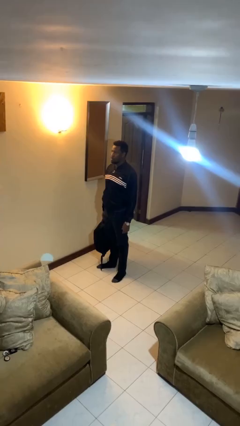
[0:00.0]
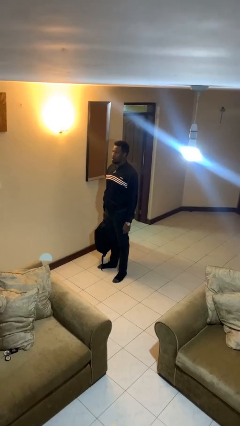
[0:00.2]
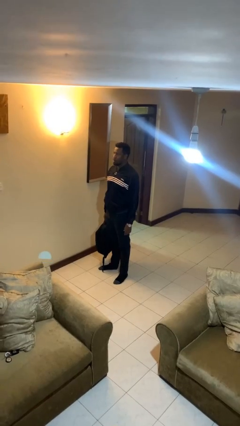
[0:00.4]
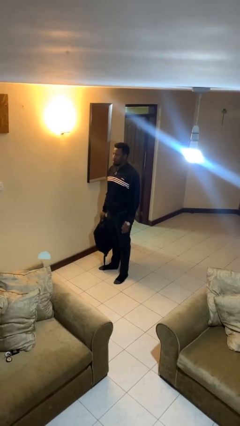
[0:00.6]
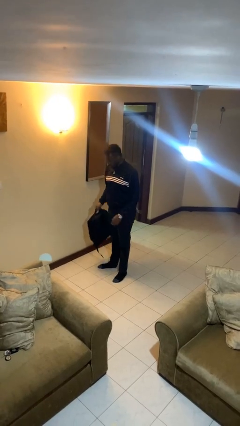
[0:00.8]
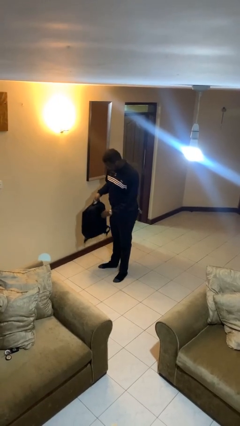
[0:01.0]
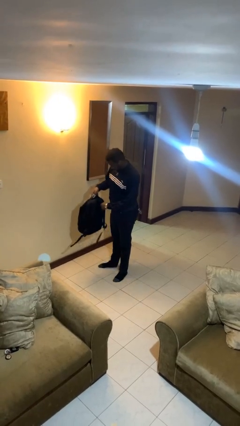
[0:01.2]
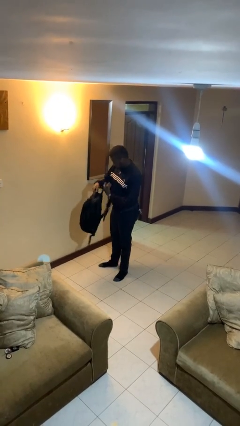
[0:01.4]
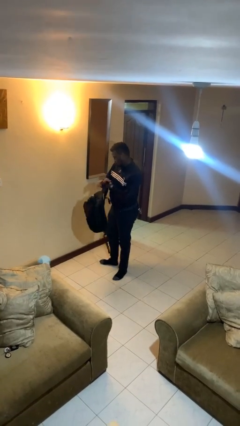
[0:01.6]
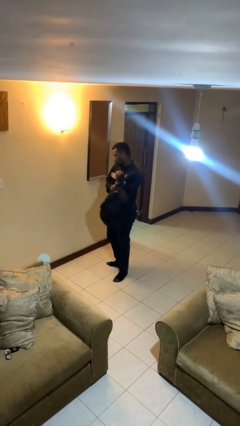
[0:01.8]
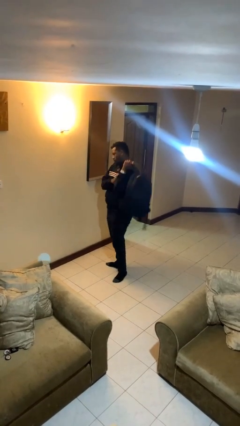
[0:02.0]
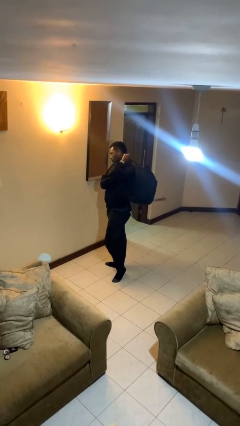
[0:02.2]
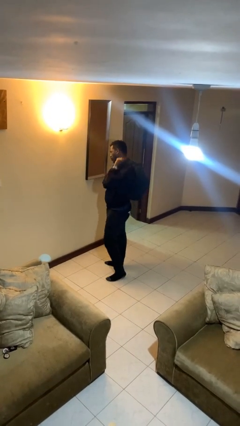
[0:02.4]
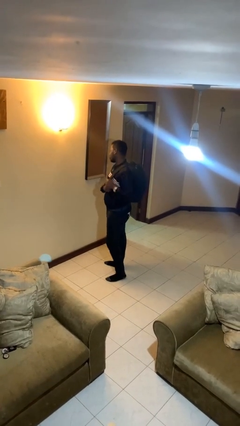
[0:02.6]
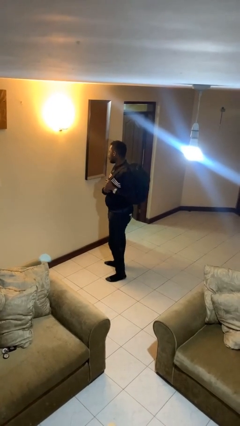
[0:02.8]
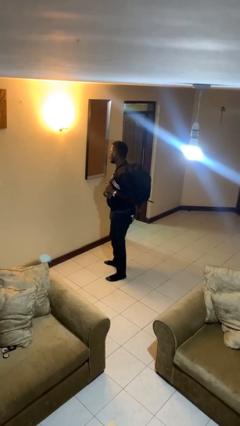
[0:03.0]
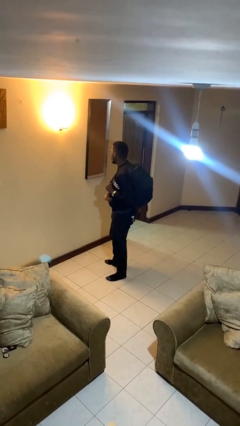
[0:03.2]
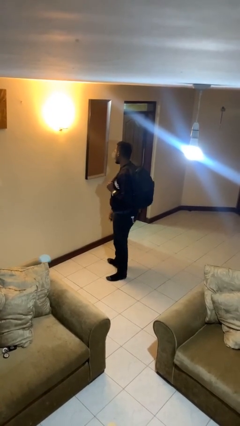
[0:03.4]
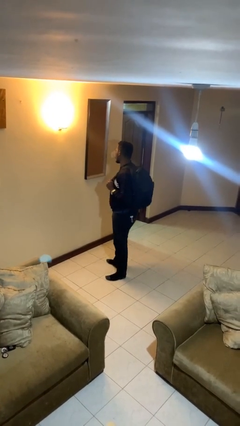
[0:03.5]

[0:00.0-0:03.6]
person puts on backpack

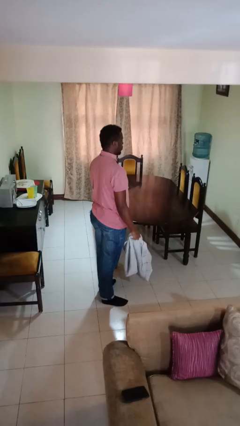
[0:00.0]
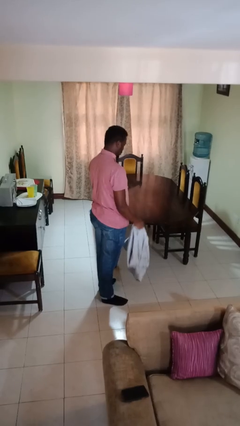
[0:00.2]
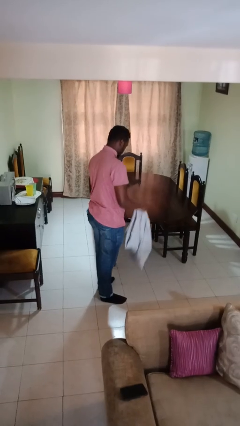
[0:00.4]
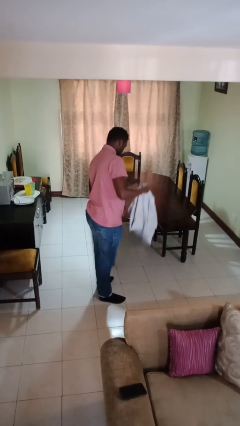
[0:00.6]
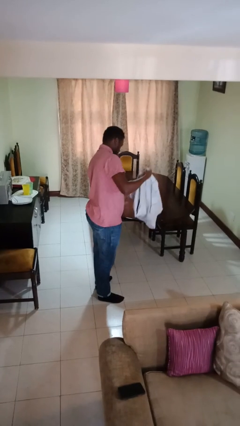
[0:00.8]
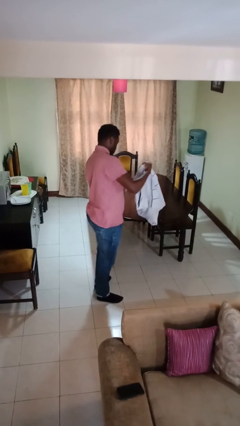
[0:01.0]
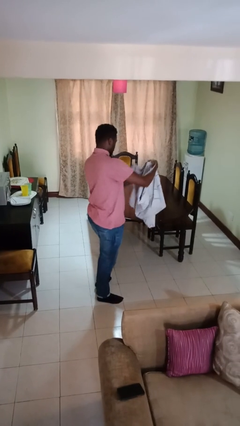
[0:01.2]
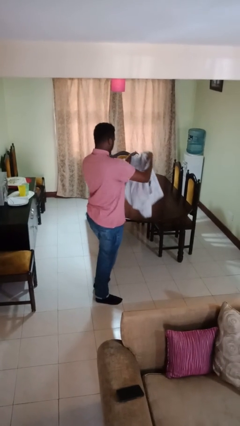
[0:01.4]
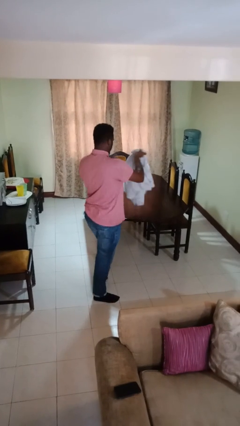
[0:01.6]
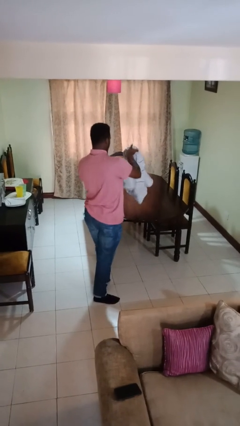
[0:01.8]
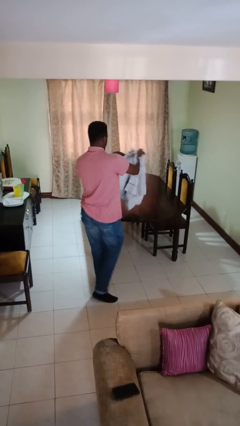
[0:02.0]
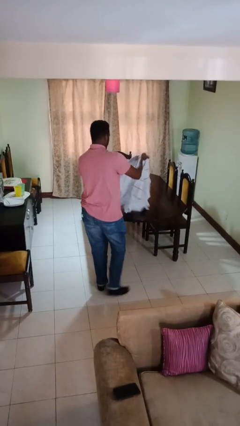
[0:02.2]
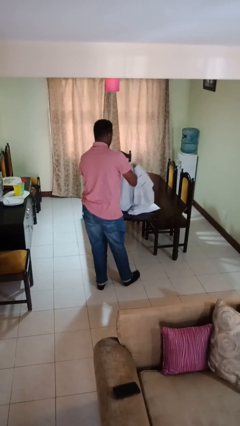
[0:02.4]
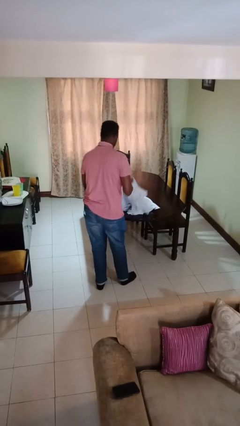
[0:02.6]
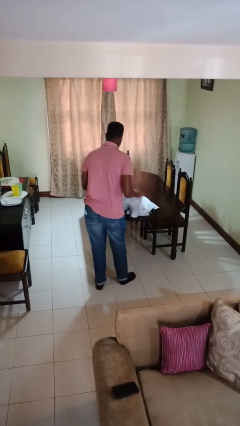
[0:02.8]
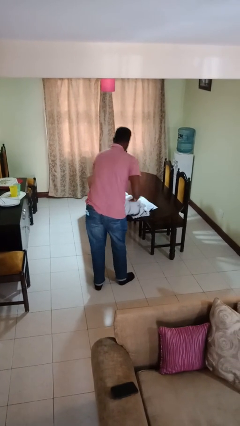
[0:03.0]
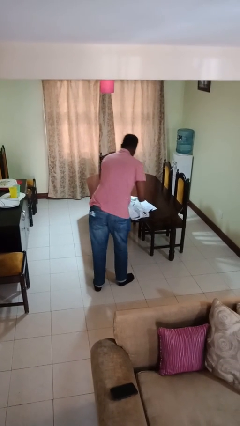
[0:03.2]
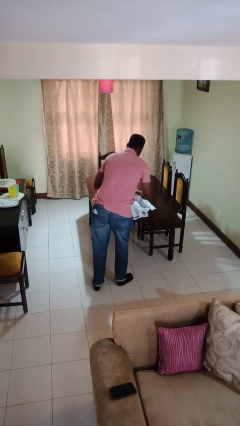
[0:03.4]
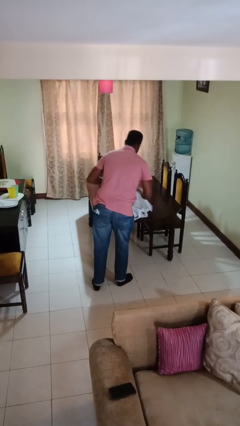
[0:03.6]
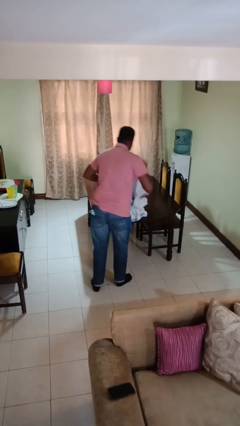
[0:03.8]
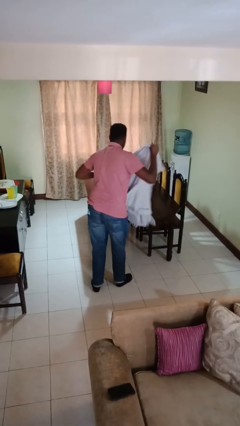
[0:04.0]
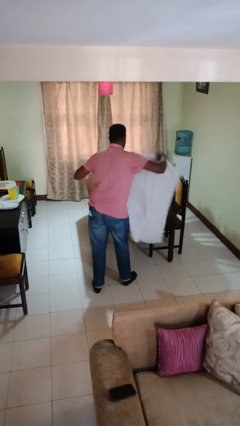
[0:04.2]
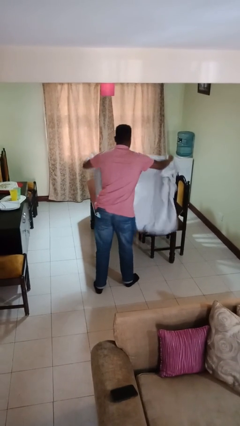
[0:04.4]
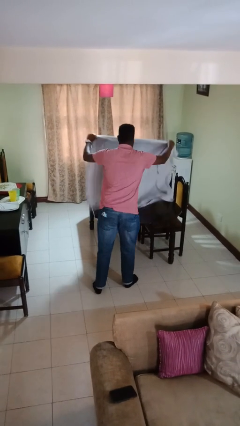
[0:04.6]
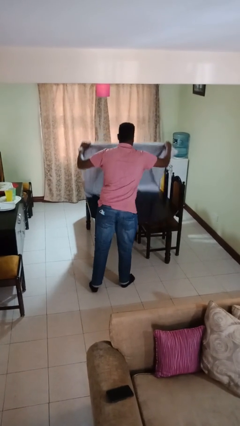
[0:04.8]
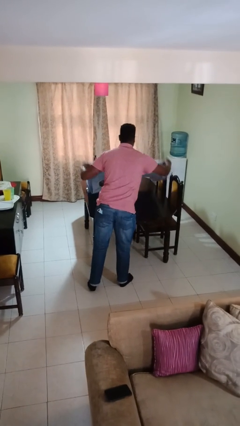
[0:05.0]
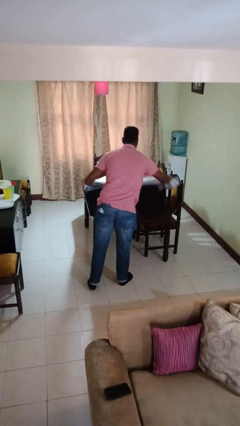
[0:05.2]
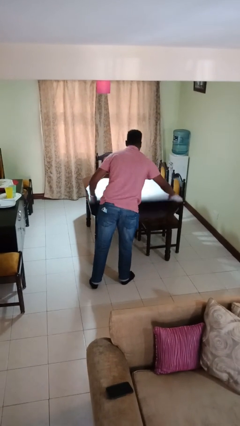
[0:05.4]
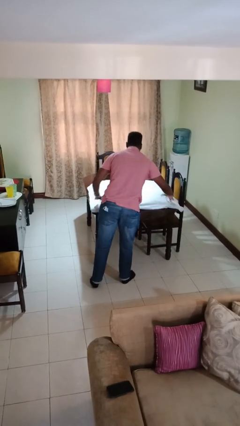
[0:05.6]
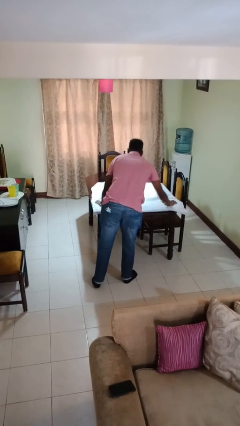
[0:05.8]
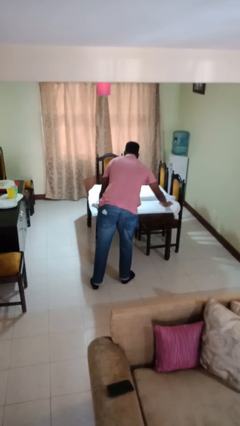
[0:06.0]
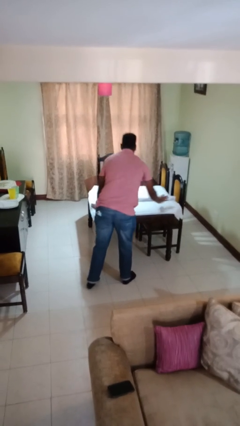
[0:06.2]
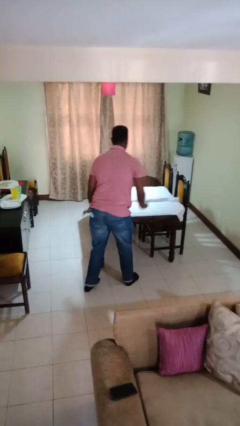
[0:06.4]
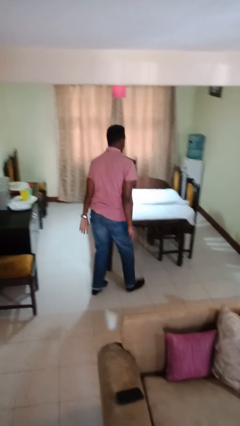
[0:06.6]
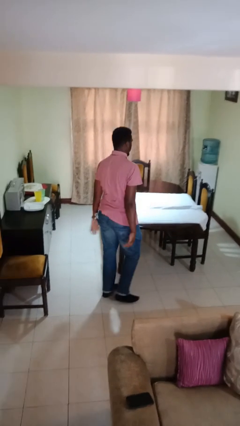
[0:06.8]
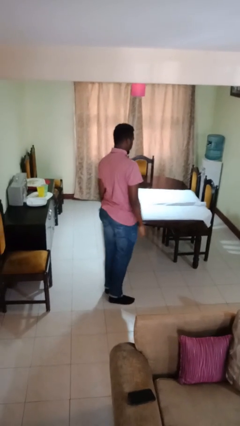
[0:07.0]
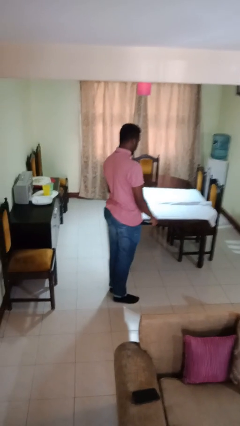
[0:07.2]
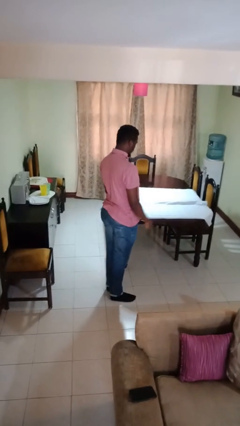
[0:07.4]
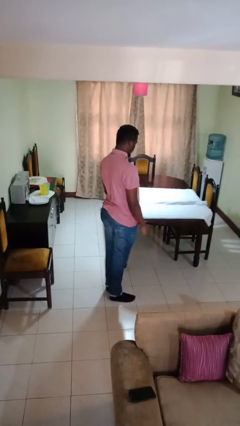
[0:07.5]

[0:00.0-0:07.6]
person spreads tablecloth

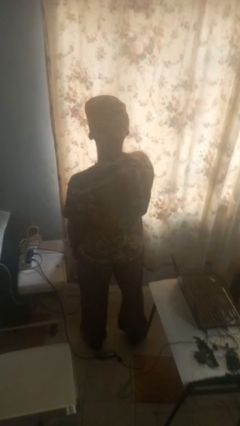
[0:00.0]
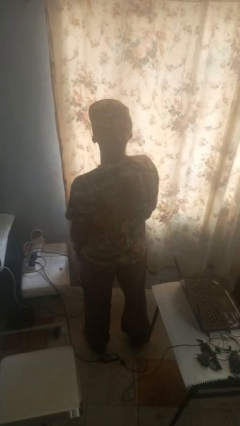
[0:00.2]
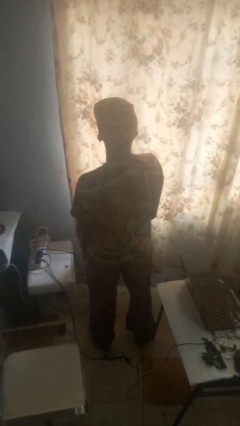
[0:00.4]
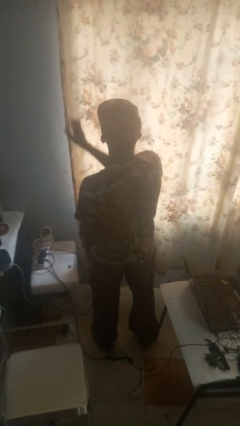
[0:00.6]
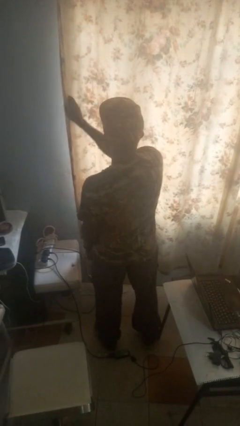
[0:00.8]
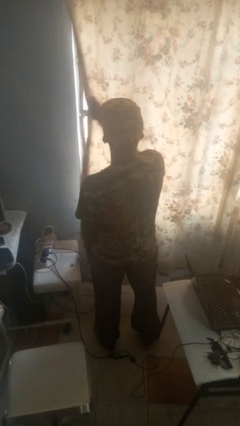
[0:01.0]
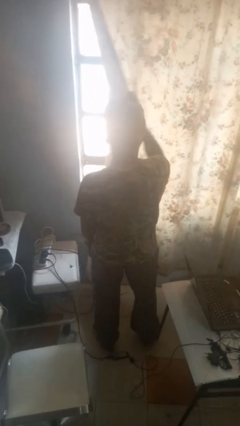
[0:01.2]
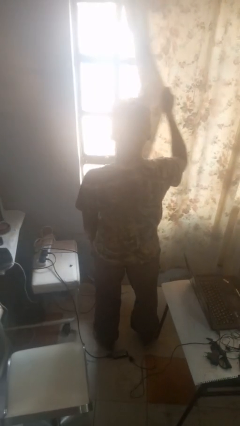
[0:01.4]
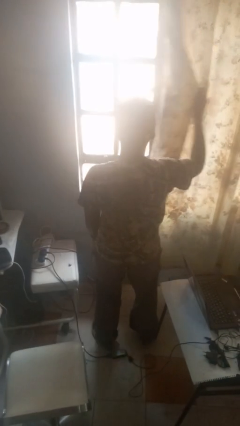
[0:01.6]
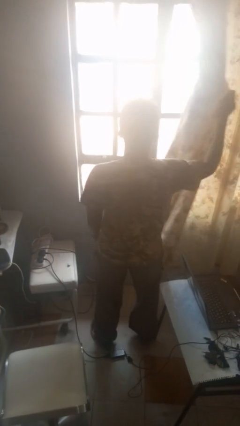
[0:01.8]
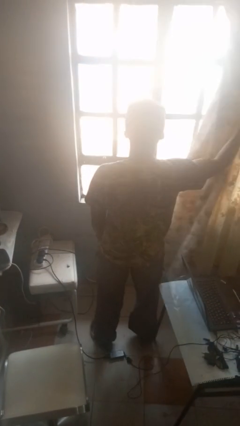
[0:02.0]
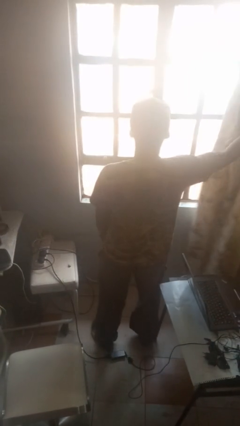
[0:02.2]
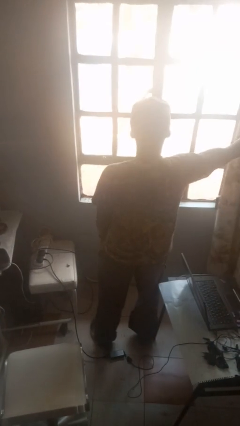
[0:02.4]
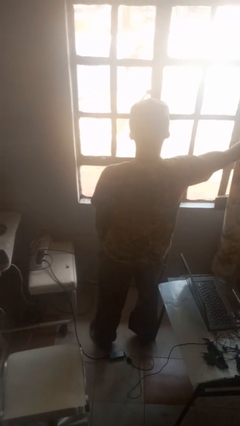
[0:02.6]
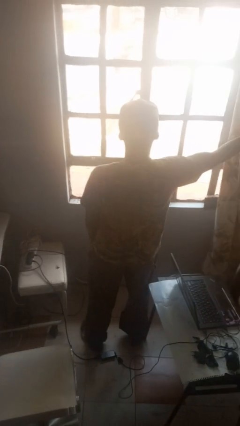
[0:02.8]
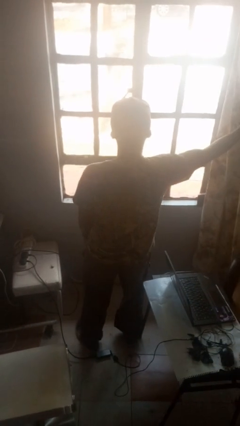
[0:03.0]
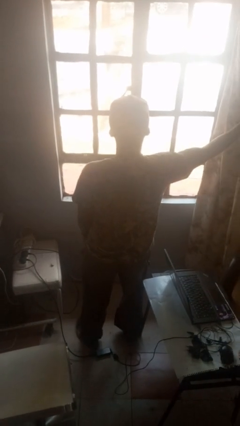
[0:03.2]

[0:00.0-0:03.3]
person opens curtains

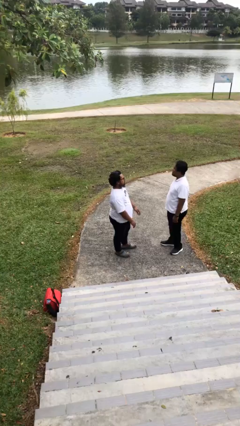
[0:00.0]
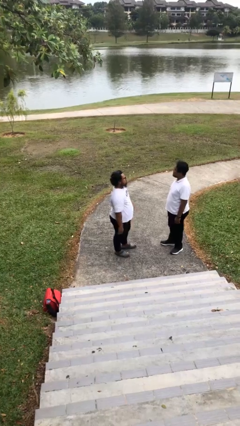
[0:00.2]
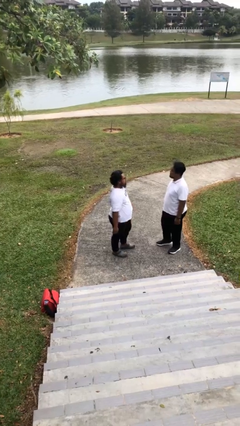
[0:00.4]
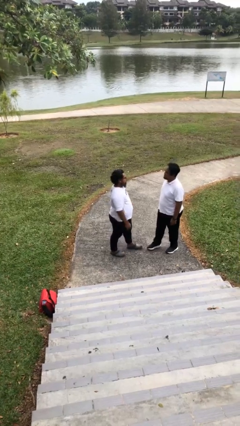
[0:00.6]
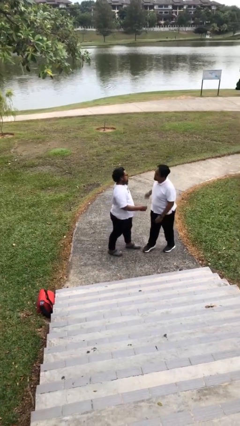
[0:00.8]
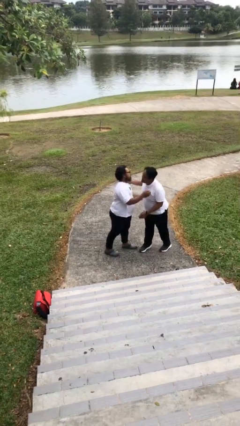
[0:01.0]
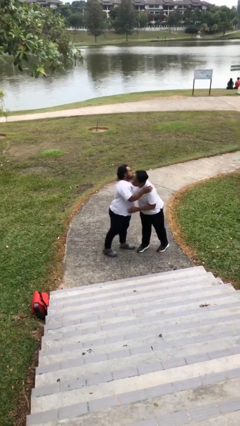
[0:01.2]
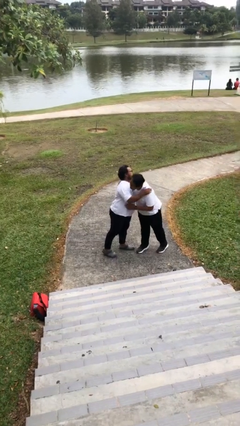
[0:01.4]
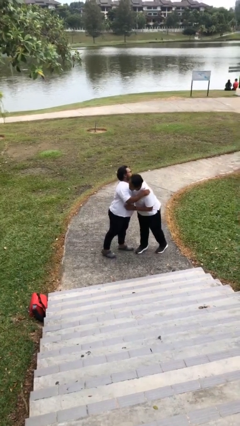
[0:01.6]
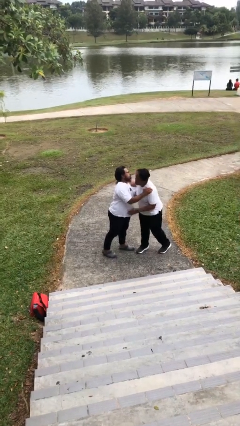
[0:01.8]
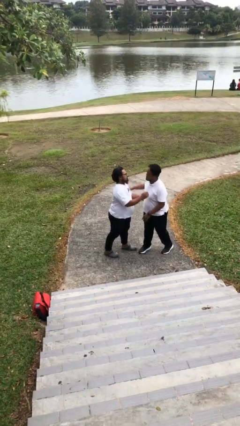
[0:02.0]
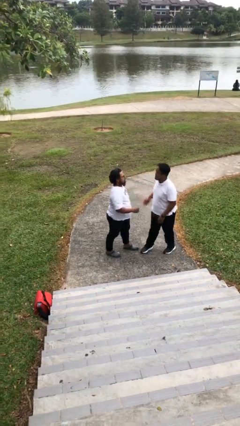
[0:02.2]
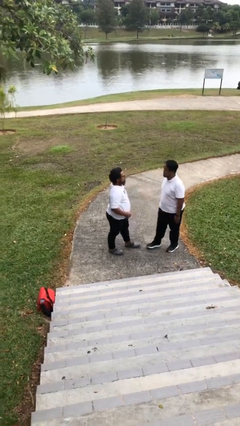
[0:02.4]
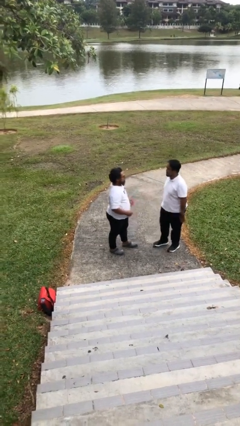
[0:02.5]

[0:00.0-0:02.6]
person embraces person

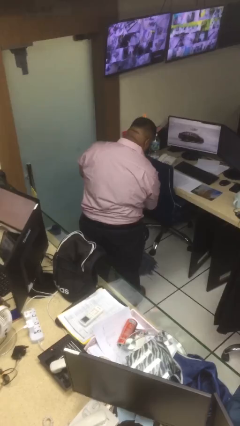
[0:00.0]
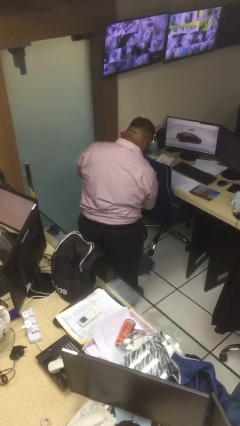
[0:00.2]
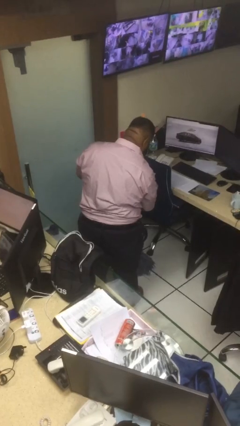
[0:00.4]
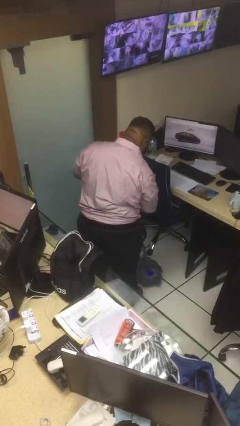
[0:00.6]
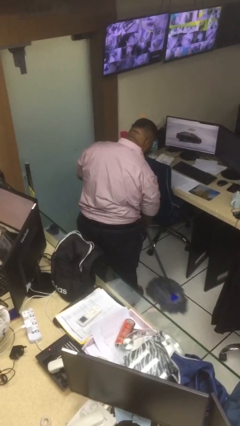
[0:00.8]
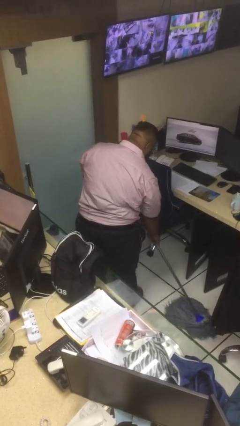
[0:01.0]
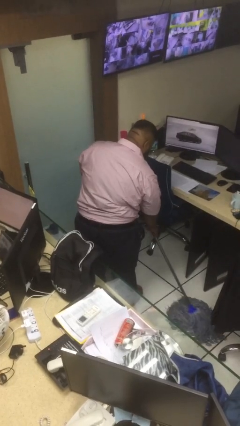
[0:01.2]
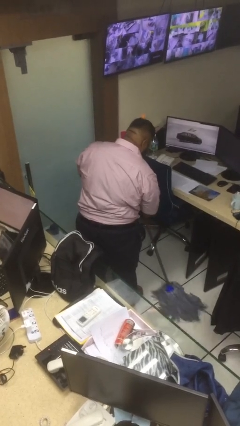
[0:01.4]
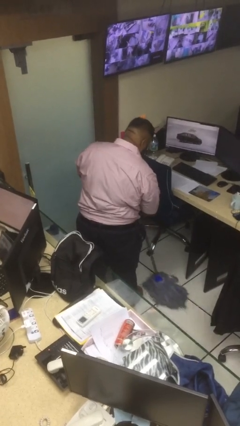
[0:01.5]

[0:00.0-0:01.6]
person mops
